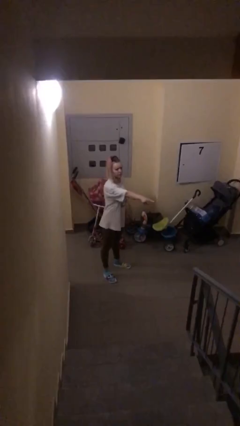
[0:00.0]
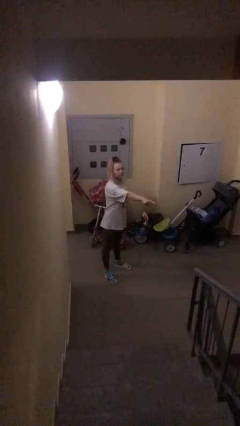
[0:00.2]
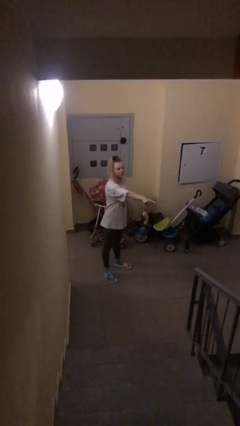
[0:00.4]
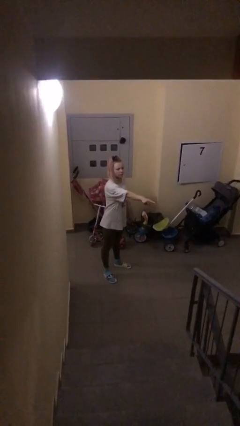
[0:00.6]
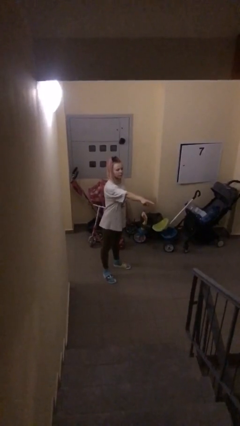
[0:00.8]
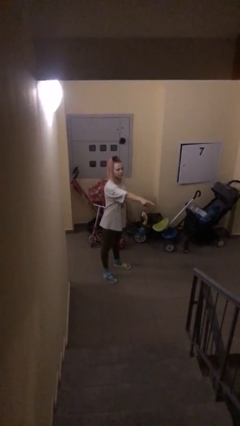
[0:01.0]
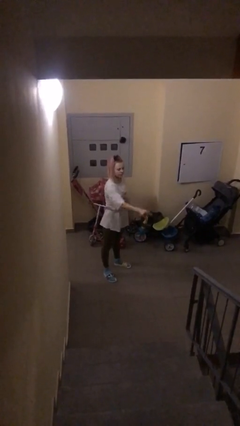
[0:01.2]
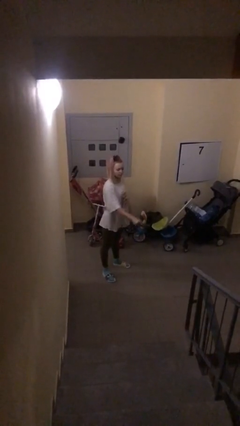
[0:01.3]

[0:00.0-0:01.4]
person points at person

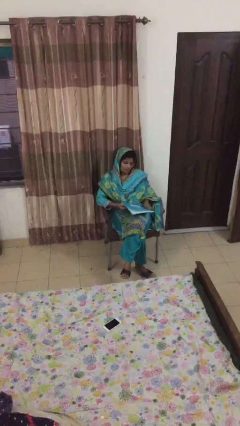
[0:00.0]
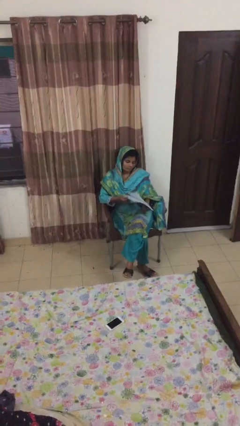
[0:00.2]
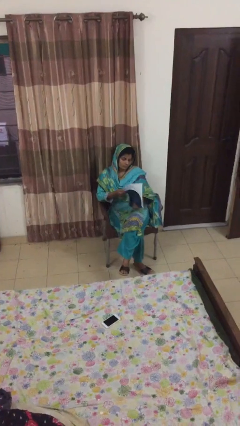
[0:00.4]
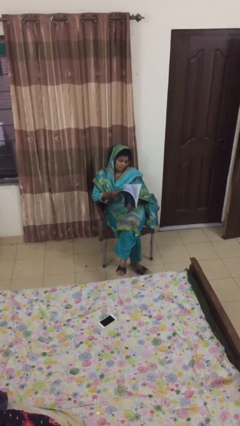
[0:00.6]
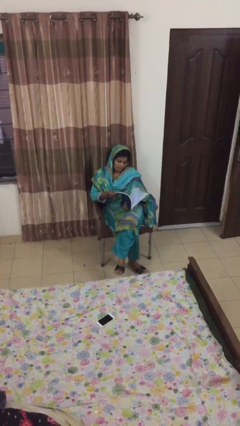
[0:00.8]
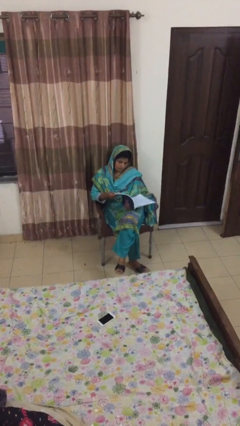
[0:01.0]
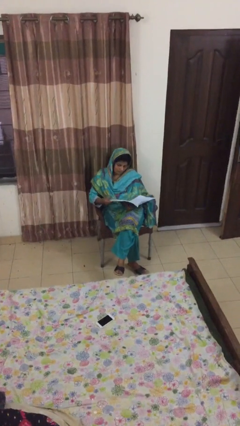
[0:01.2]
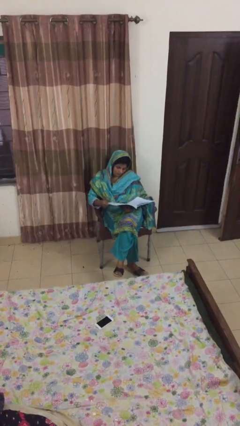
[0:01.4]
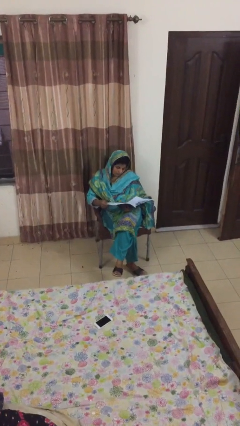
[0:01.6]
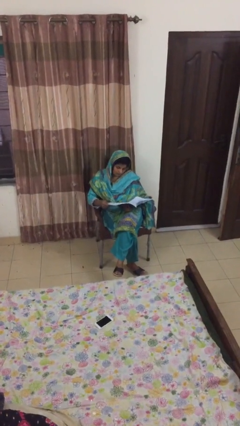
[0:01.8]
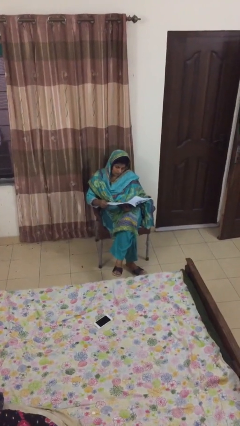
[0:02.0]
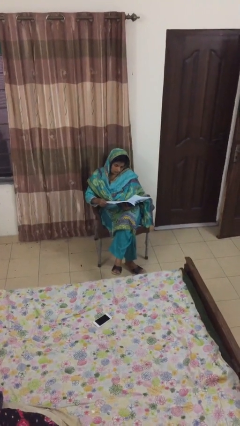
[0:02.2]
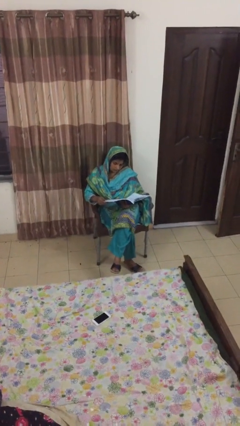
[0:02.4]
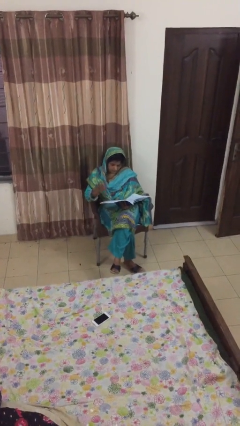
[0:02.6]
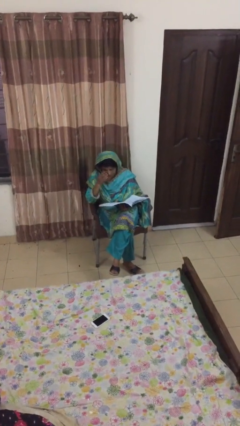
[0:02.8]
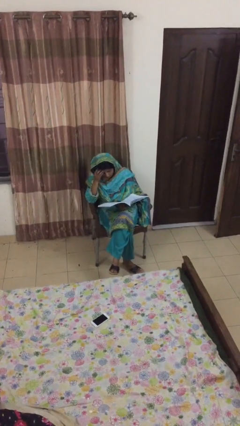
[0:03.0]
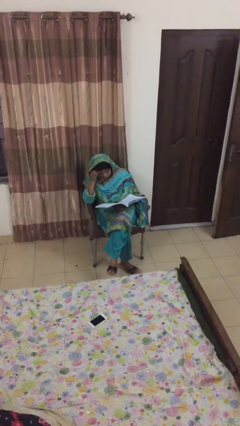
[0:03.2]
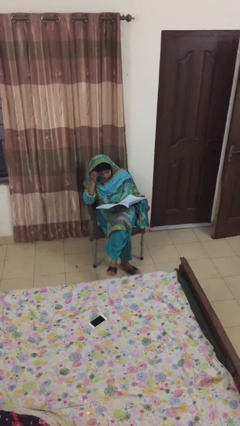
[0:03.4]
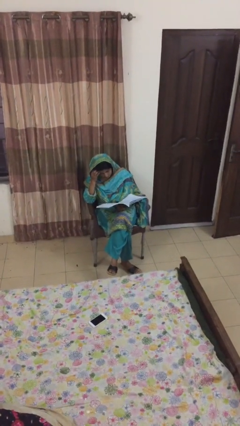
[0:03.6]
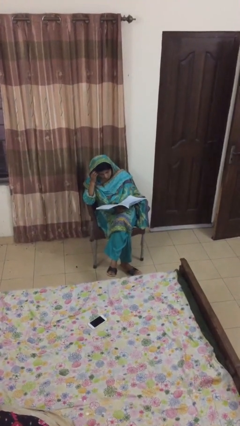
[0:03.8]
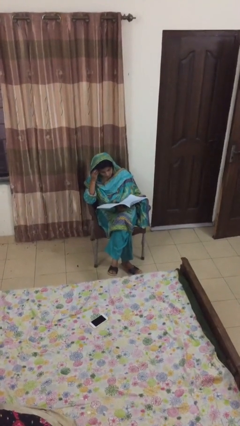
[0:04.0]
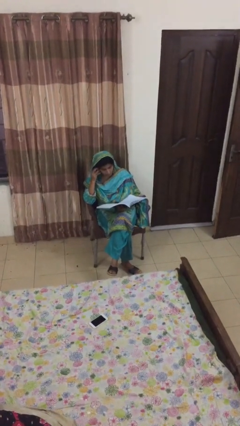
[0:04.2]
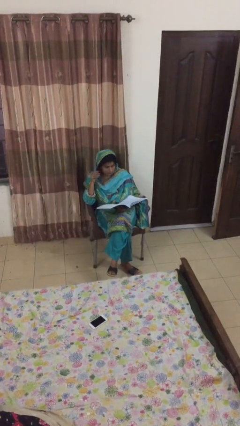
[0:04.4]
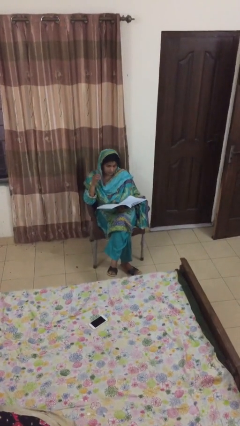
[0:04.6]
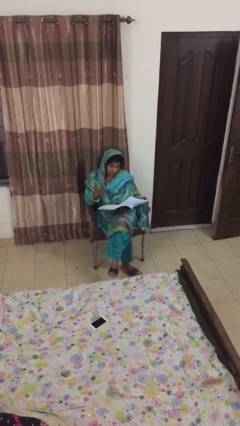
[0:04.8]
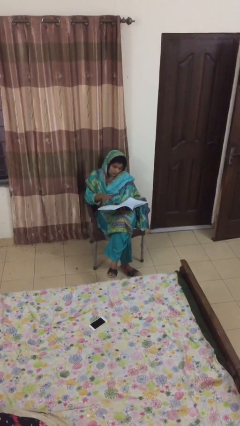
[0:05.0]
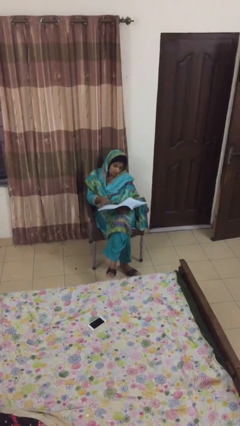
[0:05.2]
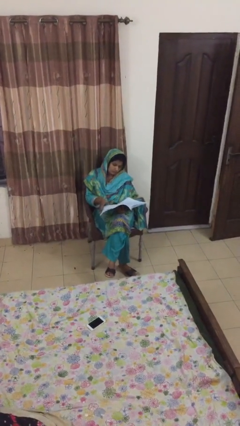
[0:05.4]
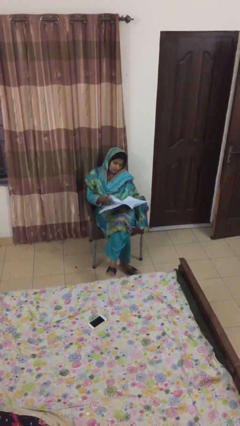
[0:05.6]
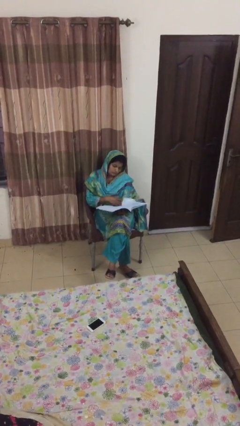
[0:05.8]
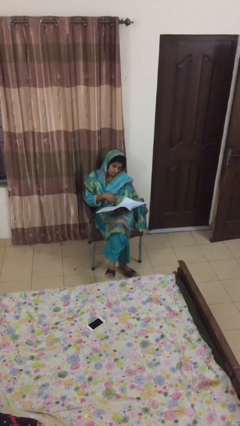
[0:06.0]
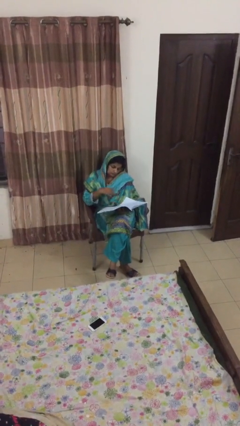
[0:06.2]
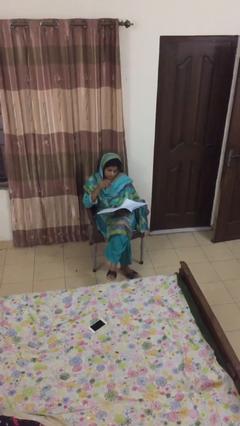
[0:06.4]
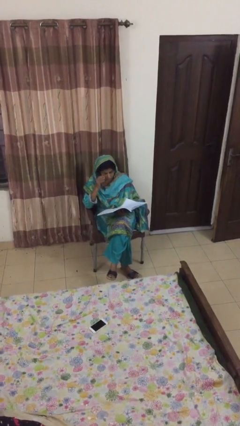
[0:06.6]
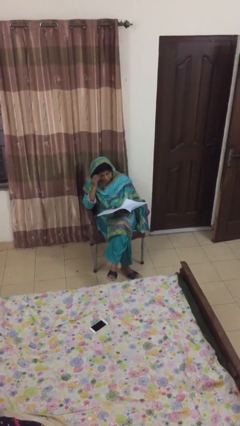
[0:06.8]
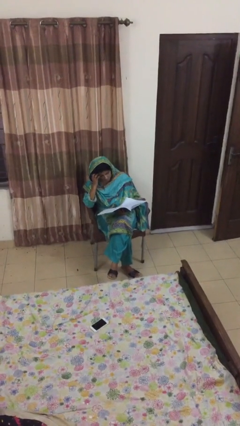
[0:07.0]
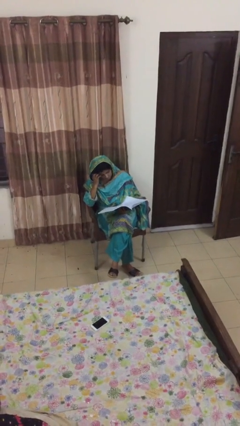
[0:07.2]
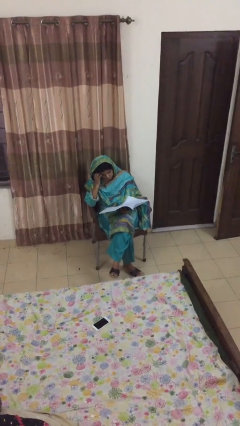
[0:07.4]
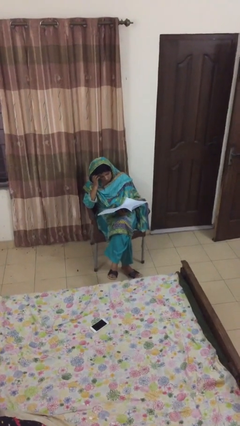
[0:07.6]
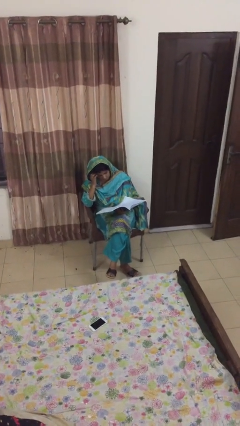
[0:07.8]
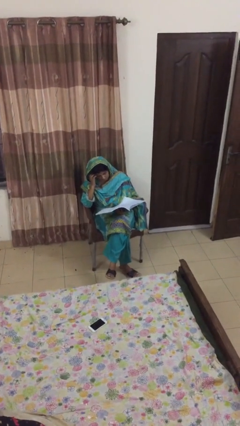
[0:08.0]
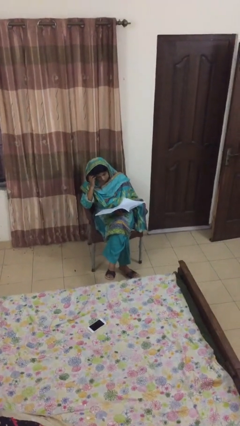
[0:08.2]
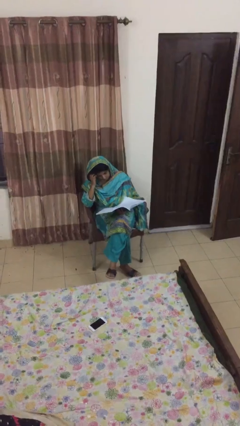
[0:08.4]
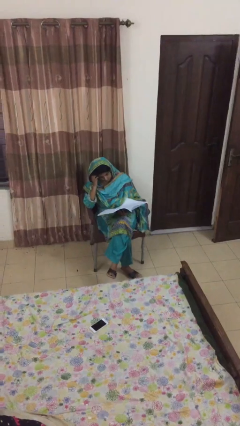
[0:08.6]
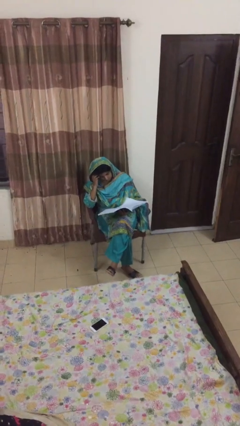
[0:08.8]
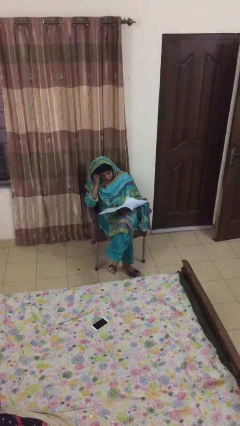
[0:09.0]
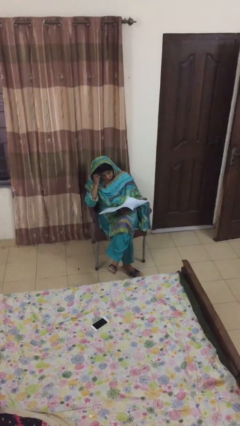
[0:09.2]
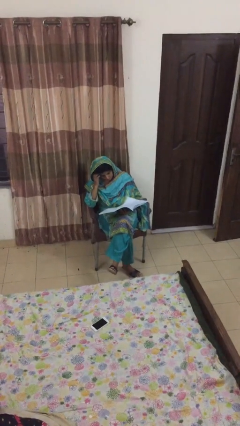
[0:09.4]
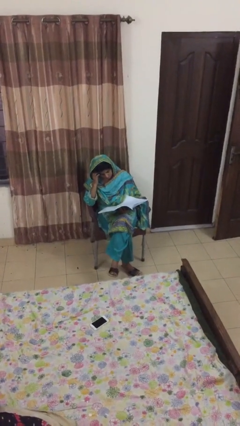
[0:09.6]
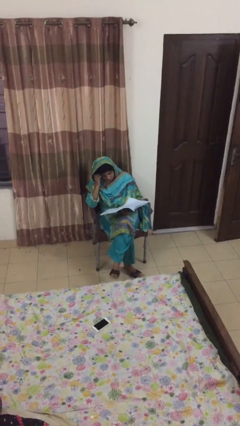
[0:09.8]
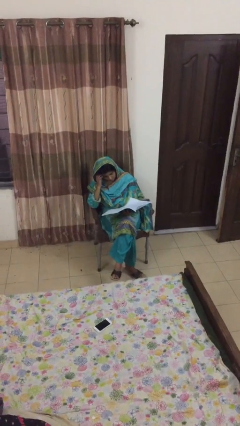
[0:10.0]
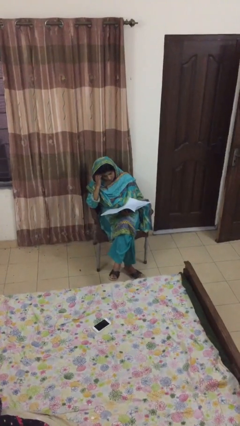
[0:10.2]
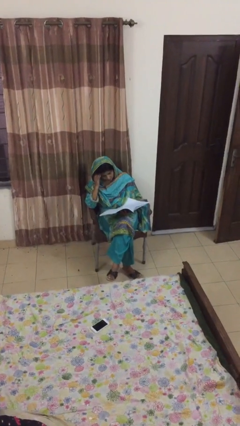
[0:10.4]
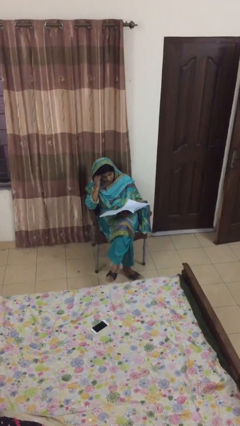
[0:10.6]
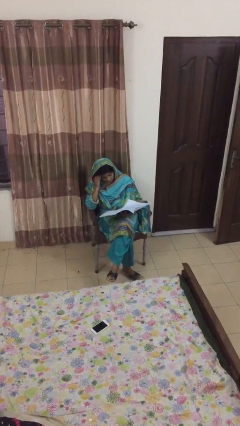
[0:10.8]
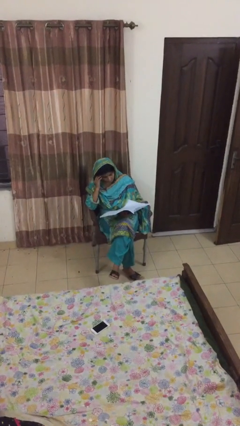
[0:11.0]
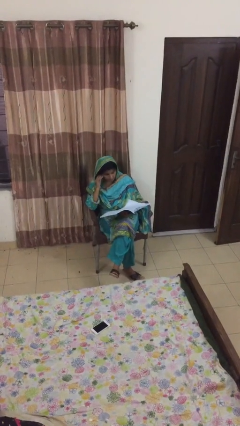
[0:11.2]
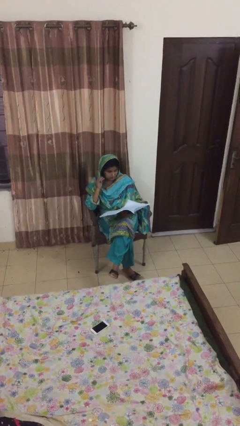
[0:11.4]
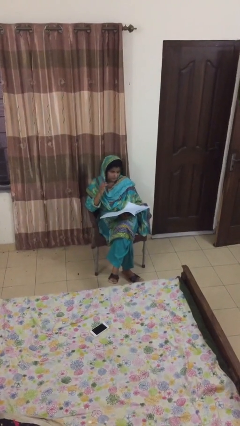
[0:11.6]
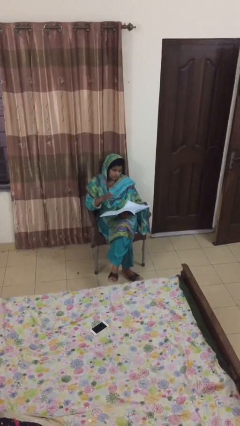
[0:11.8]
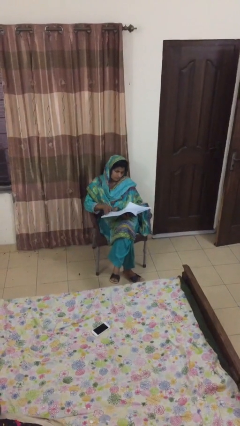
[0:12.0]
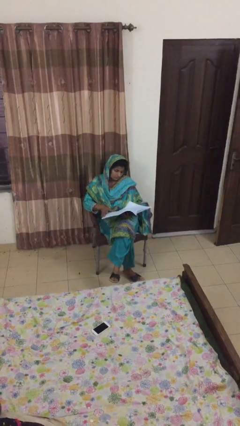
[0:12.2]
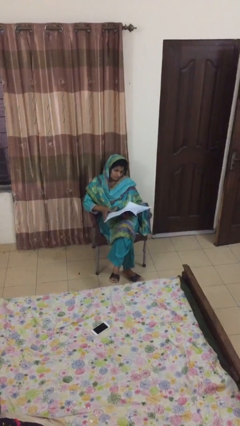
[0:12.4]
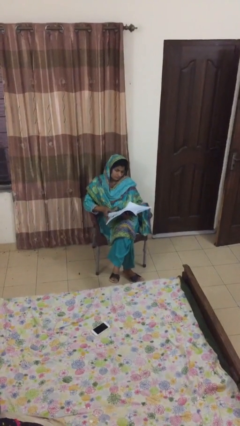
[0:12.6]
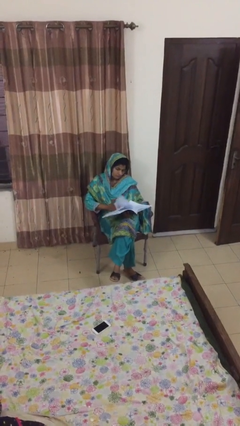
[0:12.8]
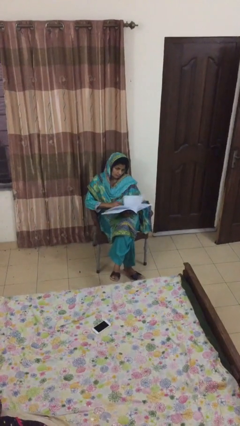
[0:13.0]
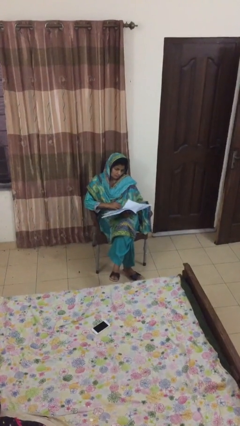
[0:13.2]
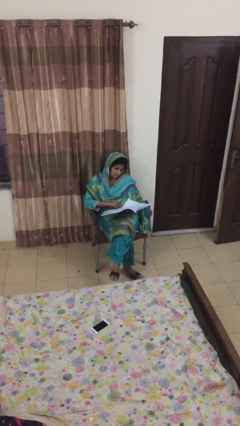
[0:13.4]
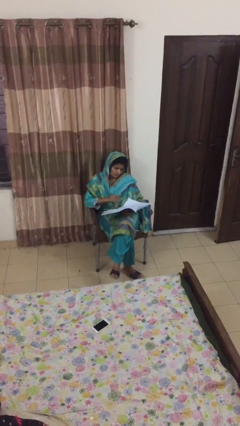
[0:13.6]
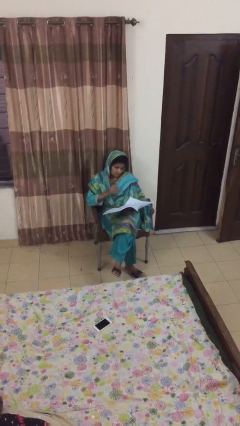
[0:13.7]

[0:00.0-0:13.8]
person reads document

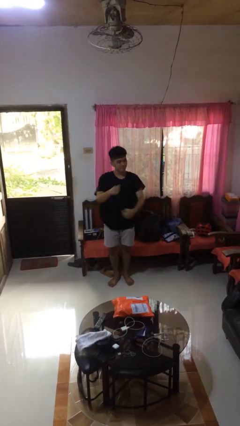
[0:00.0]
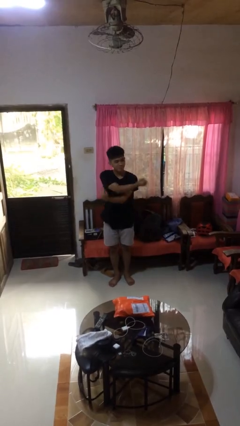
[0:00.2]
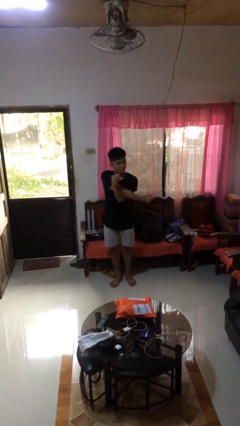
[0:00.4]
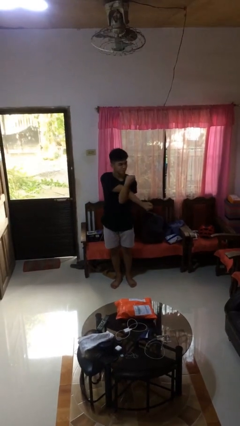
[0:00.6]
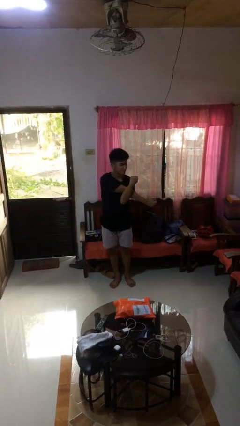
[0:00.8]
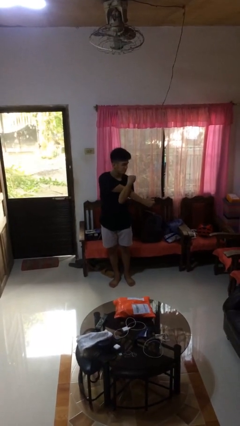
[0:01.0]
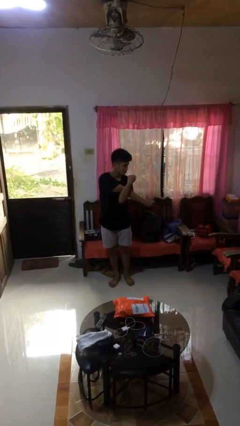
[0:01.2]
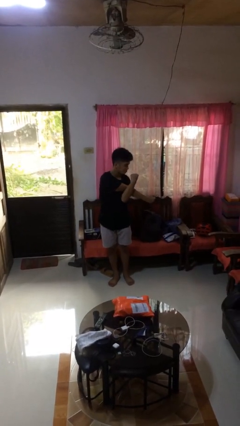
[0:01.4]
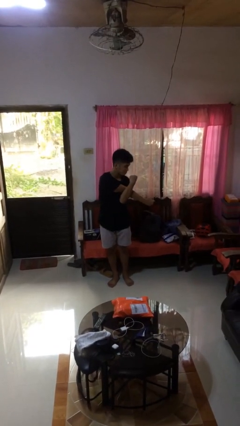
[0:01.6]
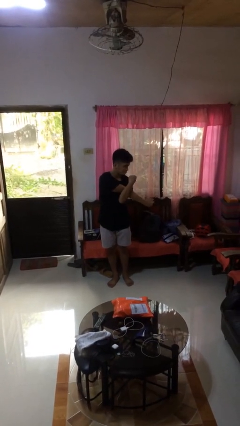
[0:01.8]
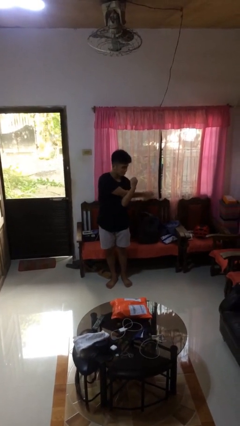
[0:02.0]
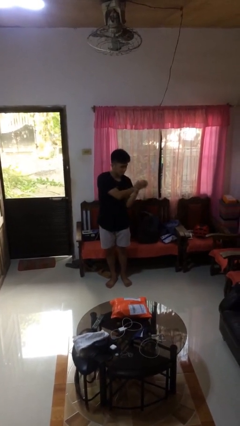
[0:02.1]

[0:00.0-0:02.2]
person stretches arms to side

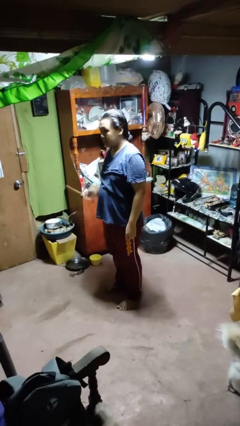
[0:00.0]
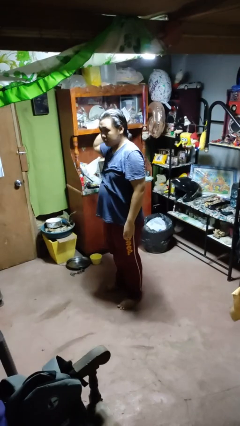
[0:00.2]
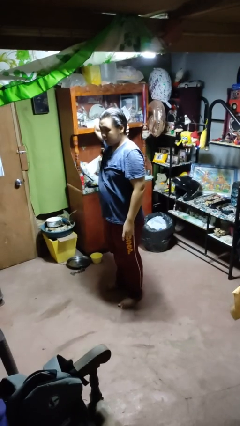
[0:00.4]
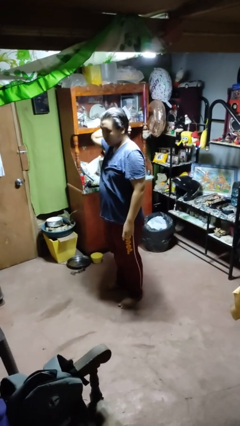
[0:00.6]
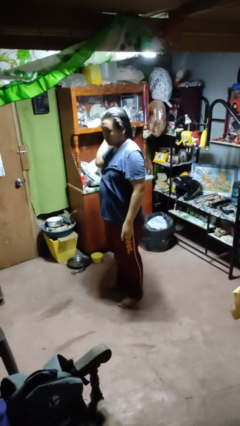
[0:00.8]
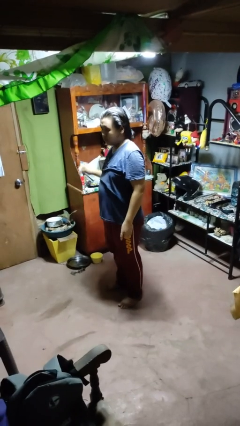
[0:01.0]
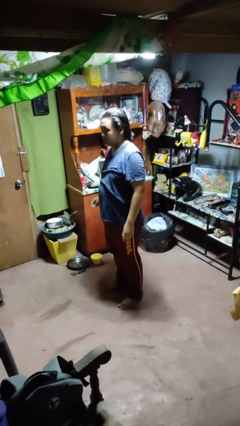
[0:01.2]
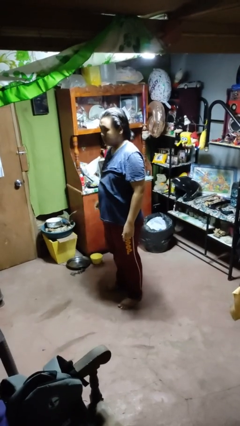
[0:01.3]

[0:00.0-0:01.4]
person takes off hairtie
